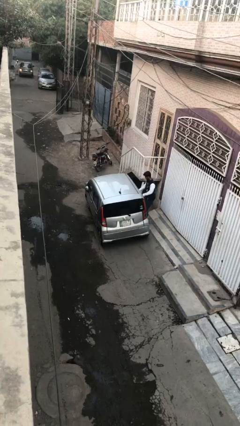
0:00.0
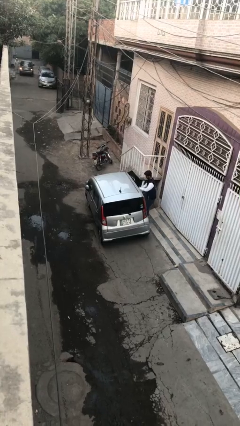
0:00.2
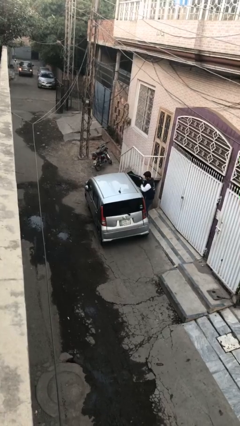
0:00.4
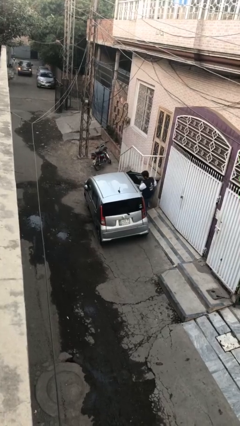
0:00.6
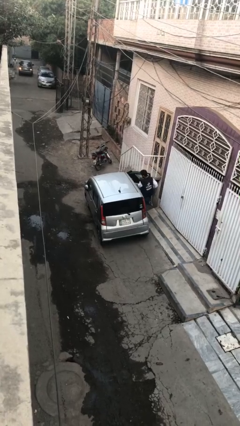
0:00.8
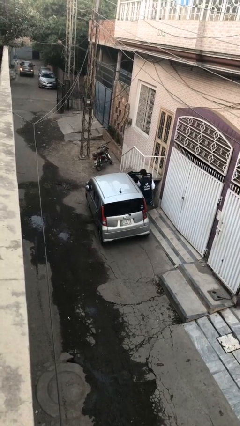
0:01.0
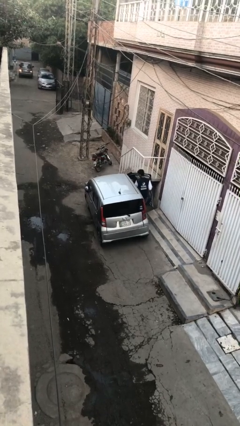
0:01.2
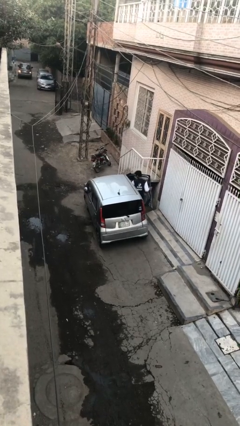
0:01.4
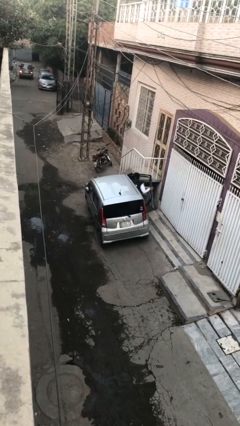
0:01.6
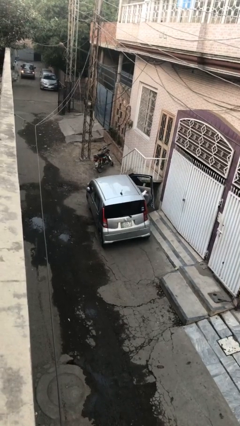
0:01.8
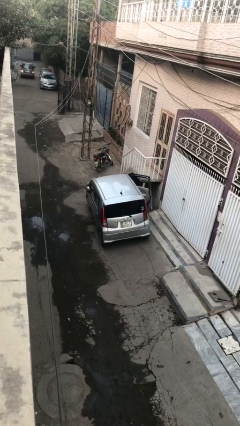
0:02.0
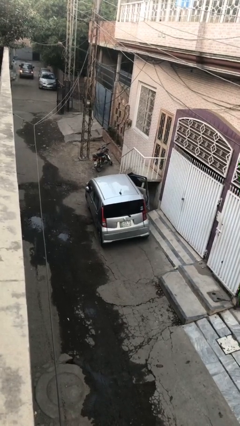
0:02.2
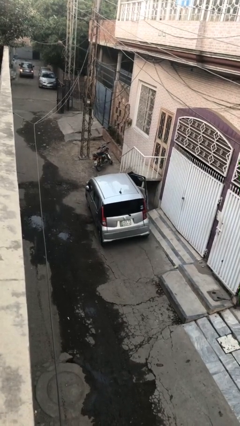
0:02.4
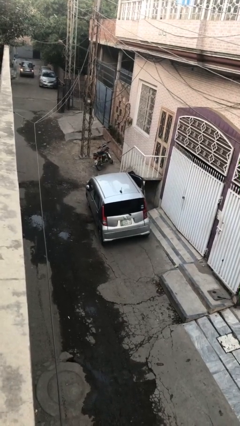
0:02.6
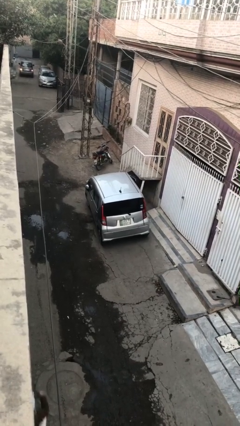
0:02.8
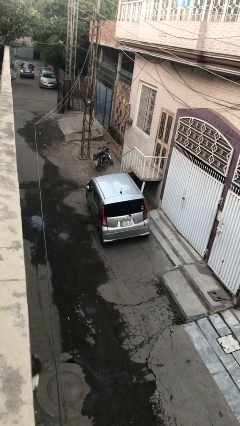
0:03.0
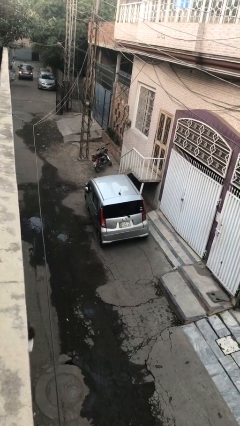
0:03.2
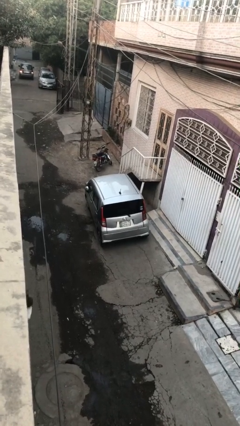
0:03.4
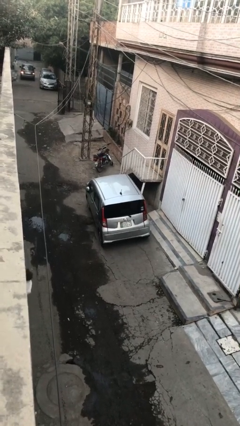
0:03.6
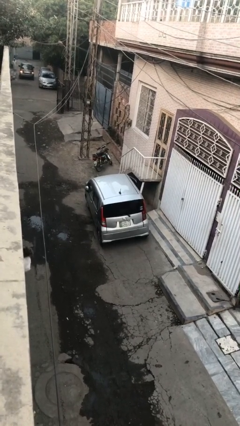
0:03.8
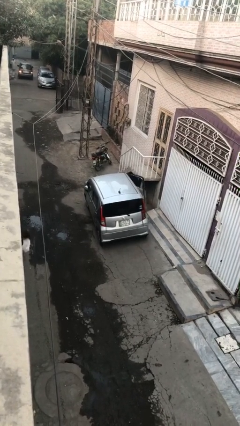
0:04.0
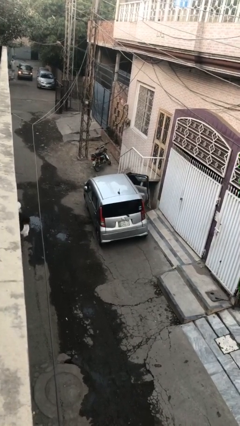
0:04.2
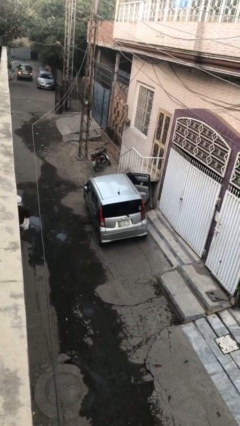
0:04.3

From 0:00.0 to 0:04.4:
car picks up person

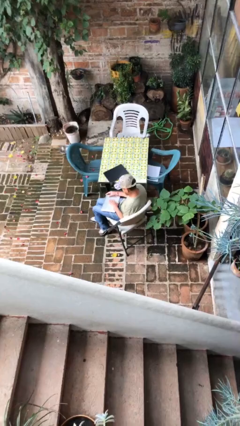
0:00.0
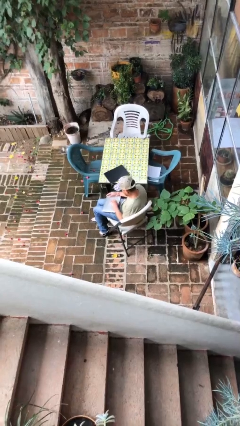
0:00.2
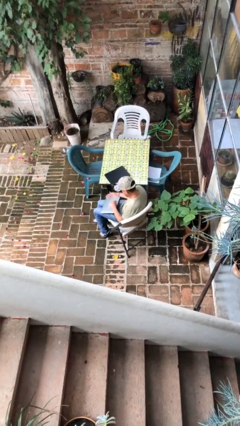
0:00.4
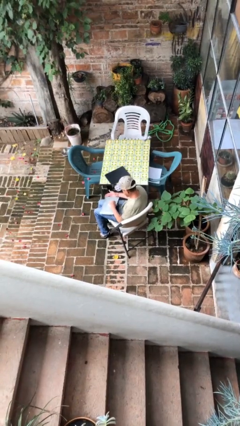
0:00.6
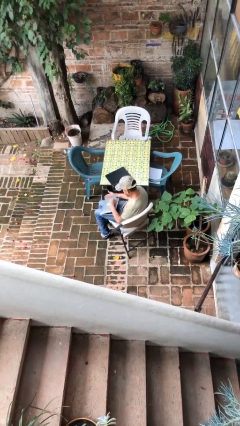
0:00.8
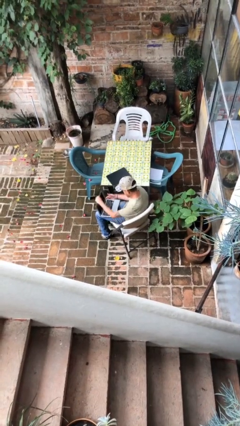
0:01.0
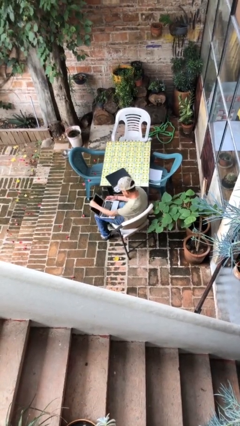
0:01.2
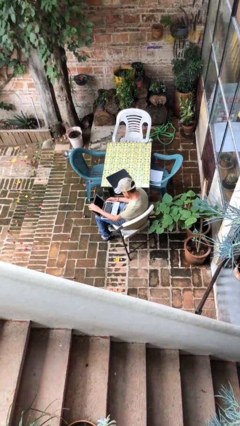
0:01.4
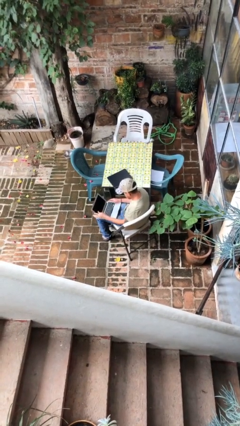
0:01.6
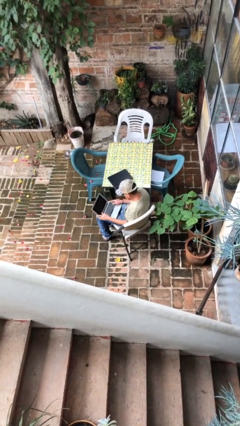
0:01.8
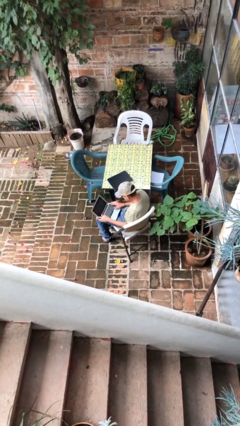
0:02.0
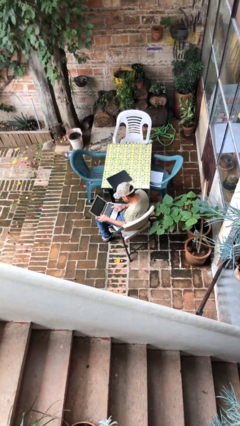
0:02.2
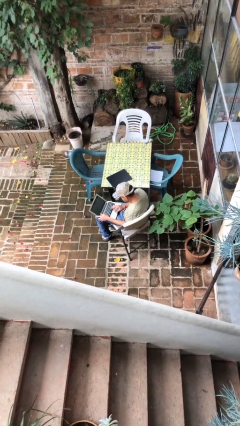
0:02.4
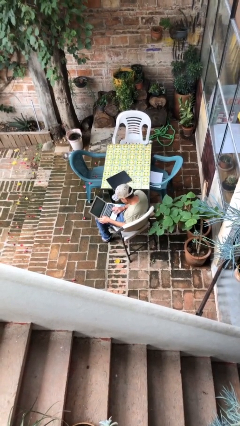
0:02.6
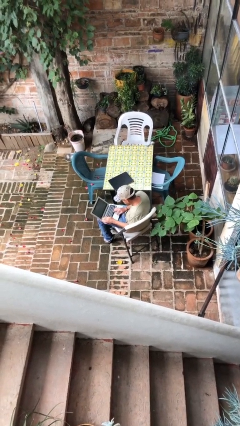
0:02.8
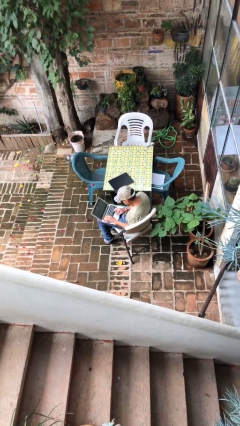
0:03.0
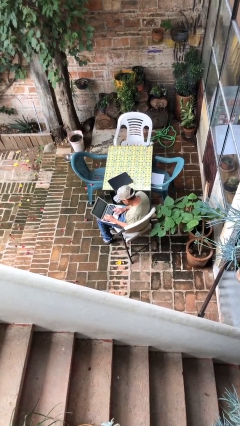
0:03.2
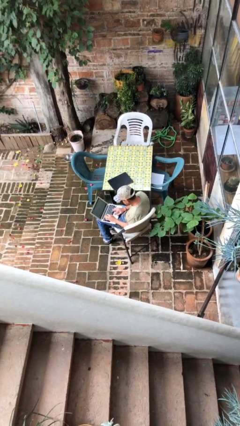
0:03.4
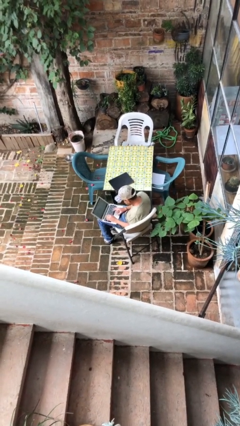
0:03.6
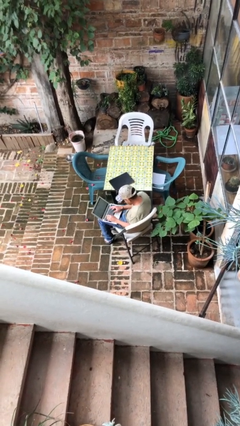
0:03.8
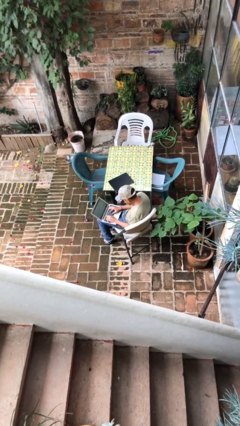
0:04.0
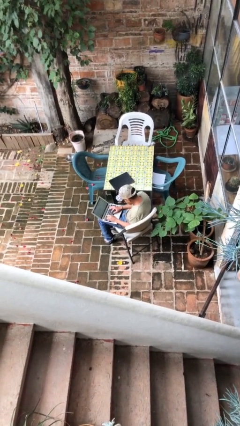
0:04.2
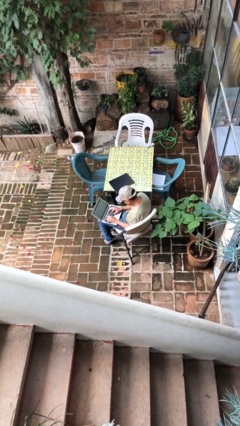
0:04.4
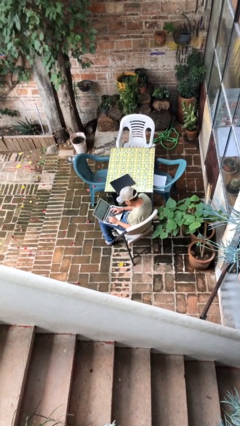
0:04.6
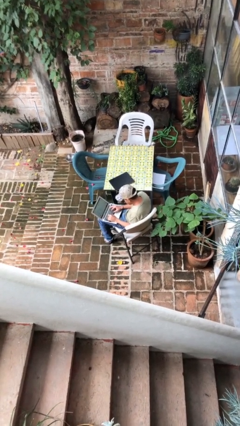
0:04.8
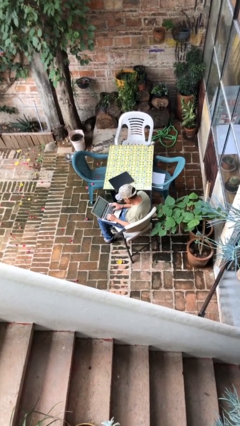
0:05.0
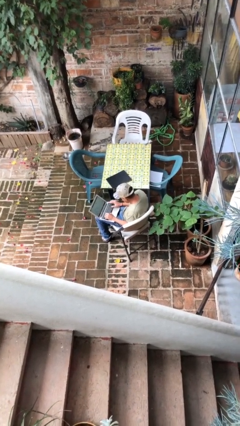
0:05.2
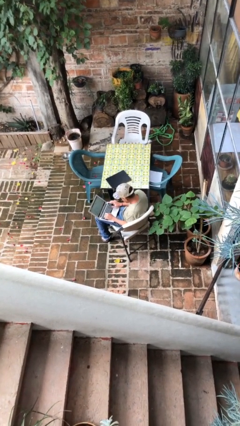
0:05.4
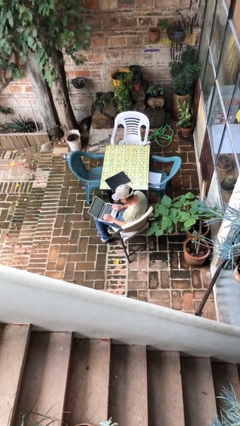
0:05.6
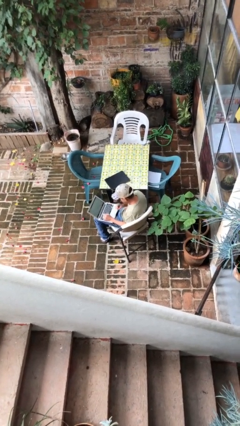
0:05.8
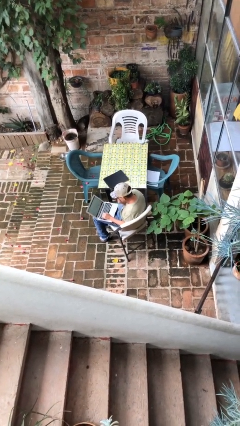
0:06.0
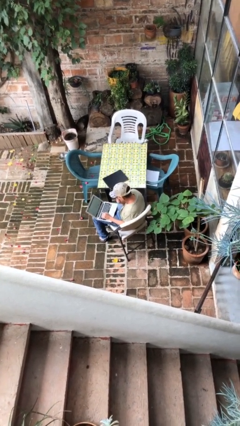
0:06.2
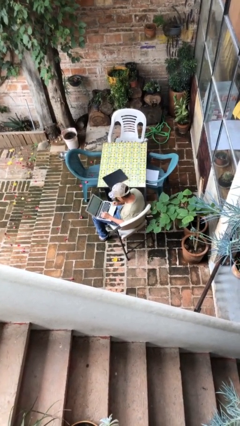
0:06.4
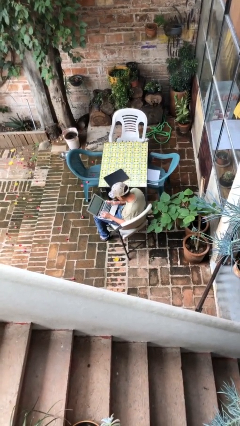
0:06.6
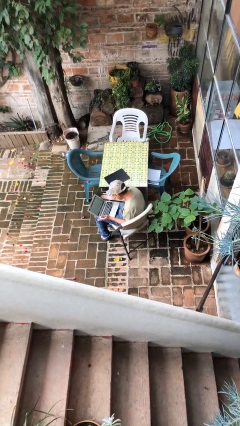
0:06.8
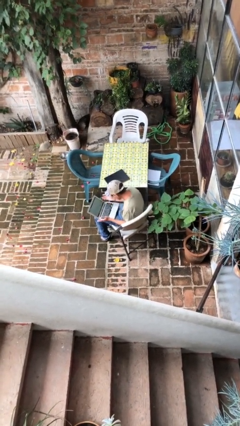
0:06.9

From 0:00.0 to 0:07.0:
person interacts with laptop

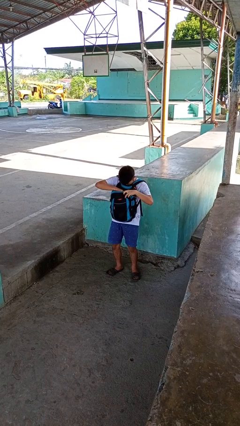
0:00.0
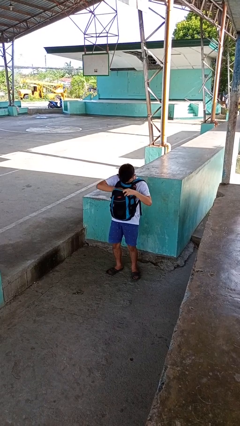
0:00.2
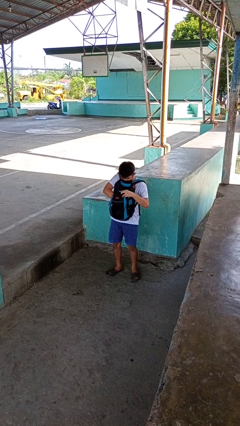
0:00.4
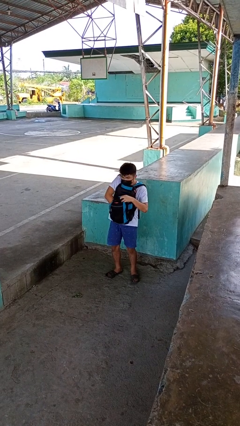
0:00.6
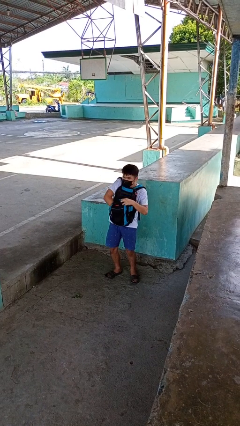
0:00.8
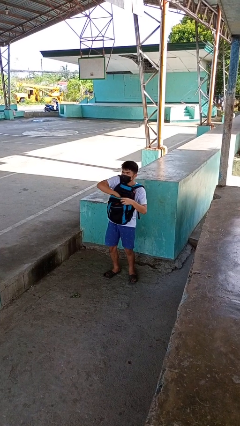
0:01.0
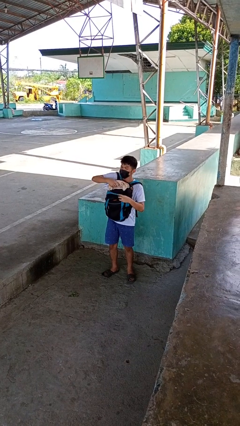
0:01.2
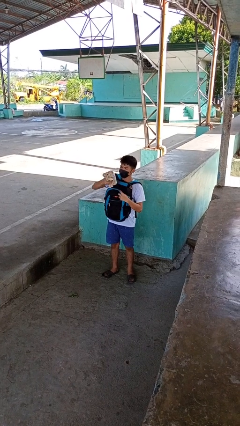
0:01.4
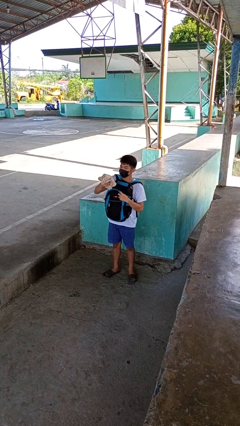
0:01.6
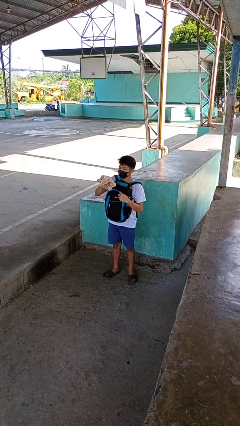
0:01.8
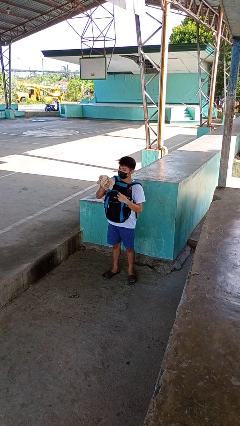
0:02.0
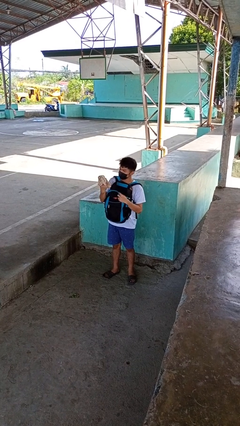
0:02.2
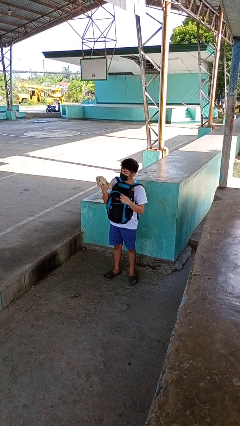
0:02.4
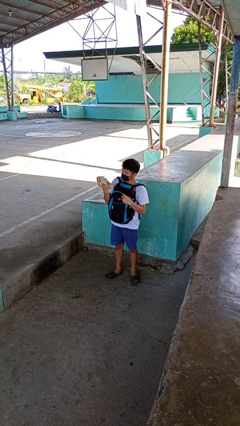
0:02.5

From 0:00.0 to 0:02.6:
person takes object from backpack

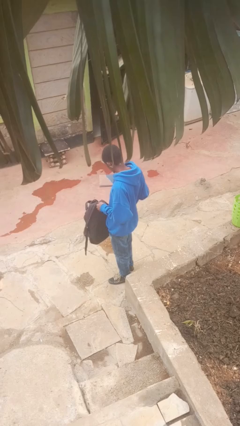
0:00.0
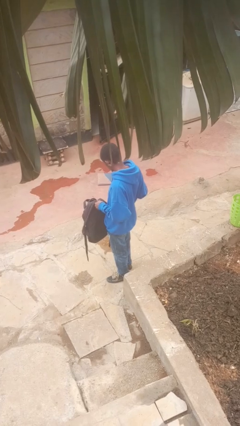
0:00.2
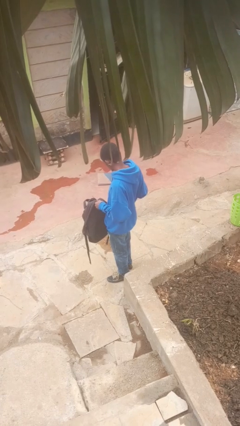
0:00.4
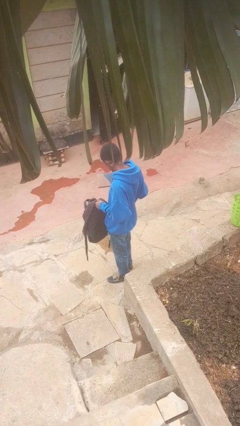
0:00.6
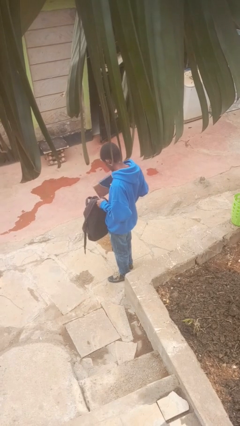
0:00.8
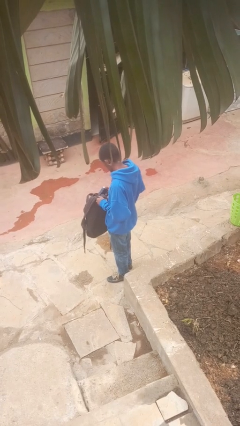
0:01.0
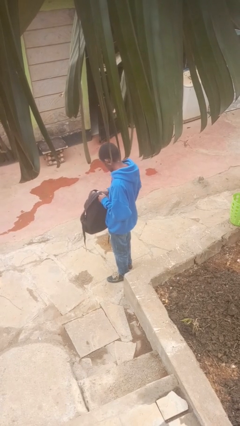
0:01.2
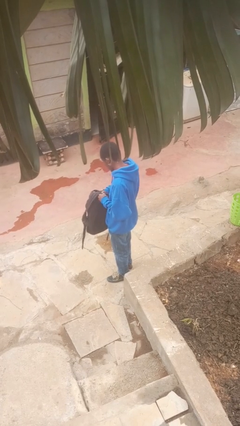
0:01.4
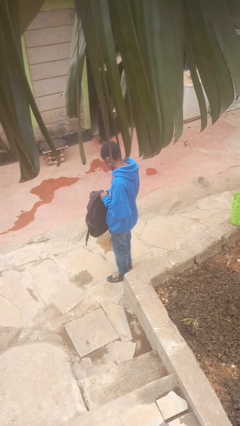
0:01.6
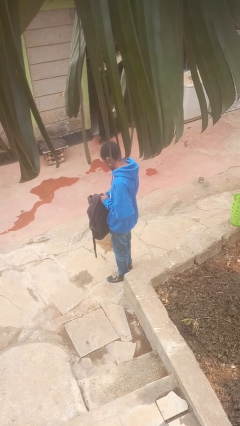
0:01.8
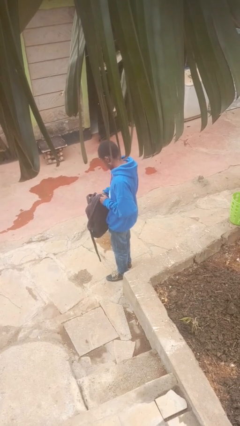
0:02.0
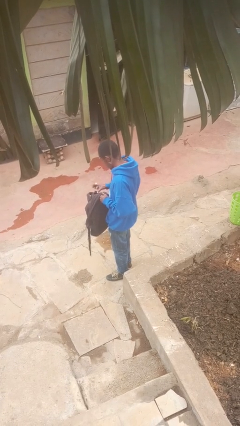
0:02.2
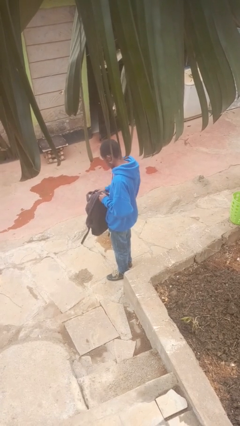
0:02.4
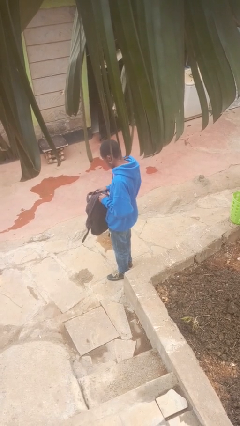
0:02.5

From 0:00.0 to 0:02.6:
person puts object into backpack

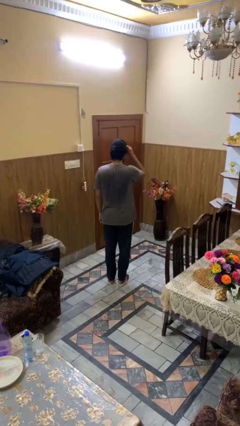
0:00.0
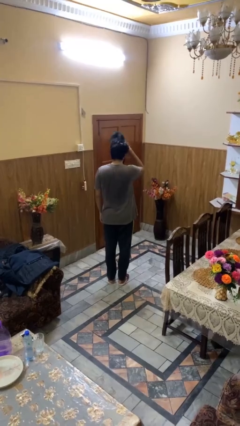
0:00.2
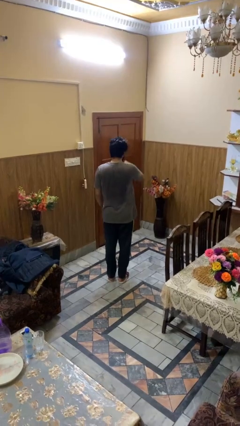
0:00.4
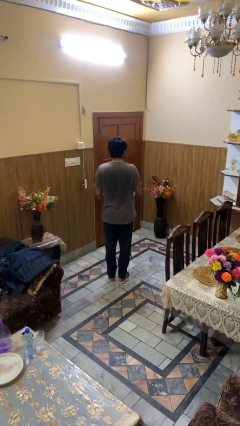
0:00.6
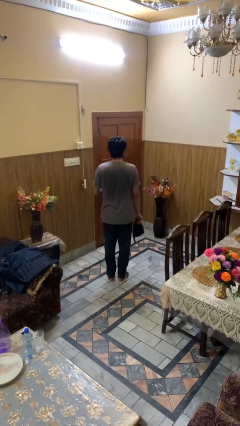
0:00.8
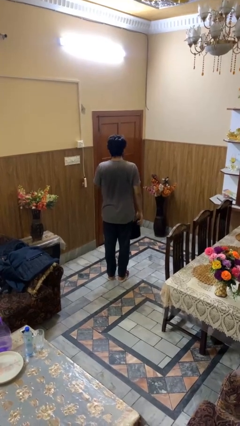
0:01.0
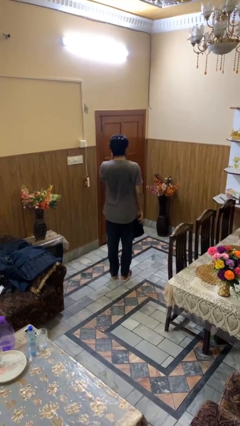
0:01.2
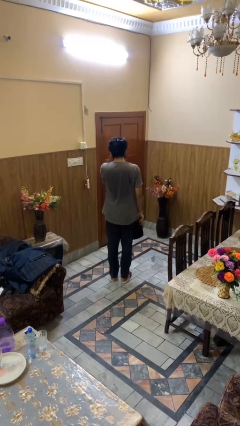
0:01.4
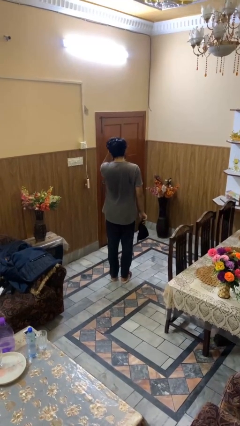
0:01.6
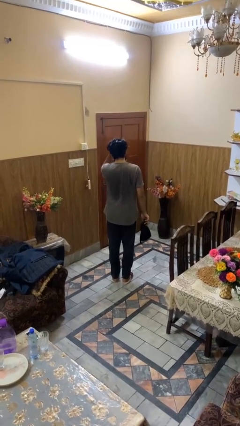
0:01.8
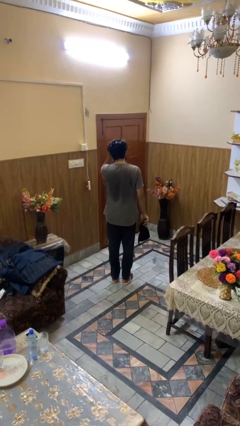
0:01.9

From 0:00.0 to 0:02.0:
person takes off hat
